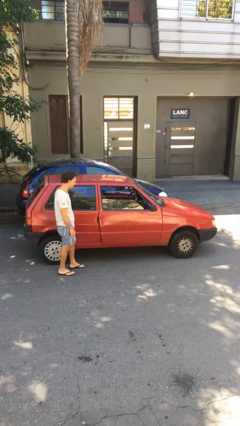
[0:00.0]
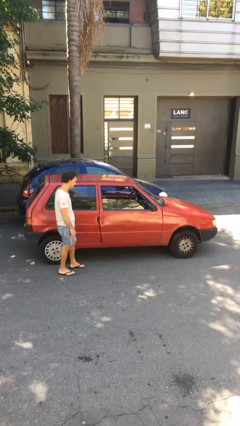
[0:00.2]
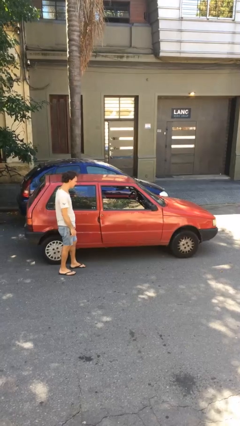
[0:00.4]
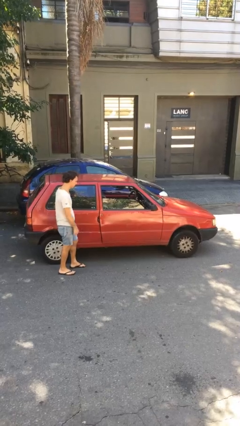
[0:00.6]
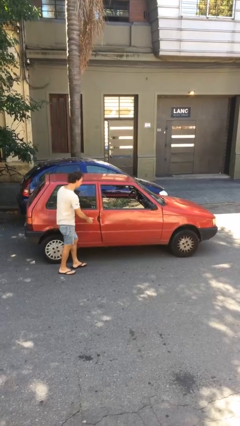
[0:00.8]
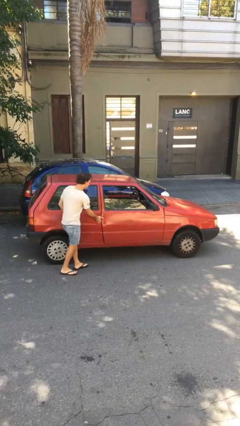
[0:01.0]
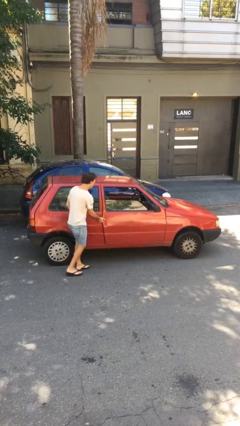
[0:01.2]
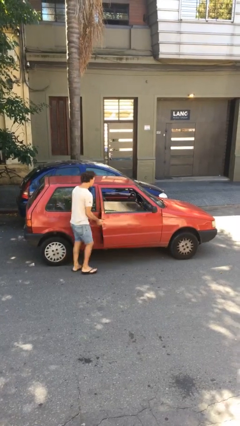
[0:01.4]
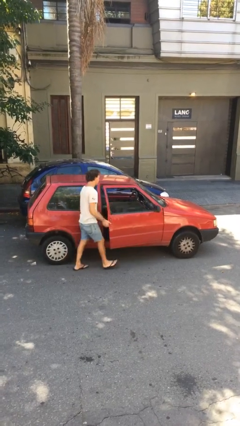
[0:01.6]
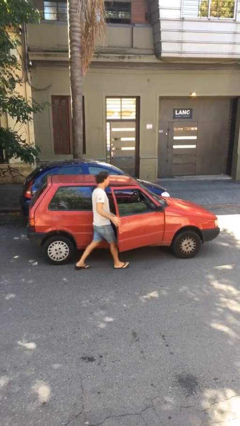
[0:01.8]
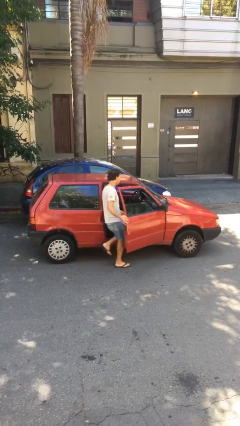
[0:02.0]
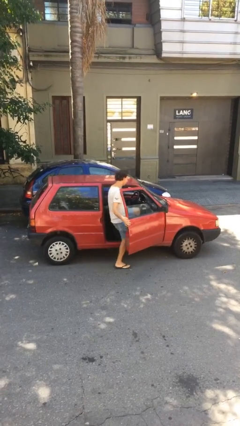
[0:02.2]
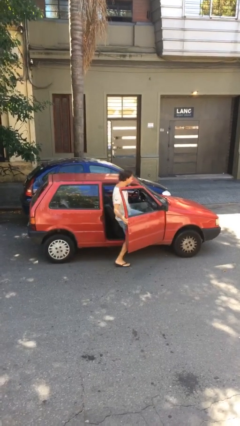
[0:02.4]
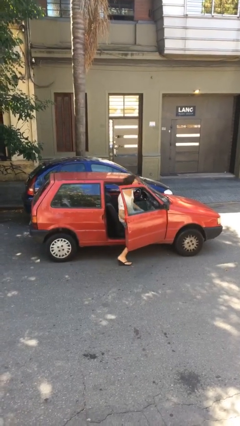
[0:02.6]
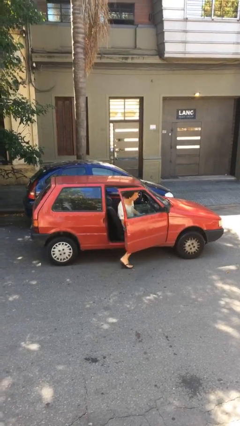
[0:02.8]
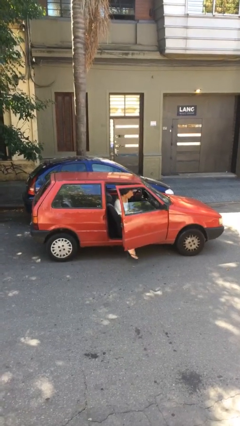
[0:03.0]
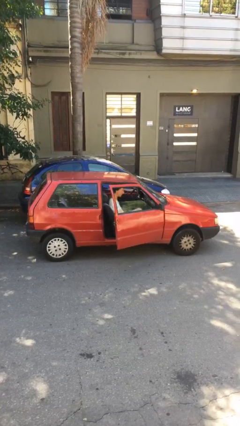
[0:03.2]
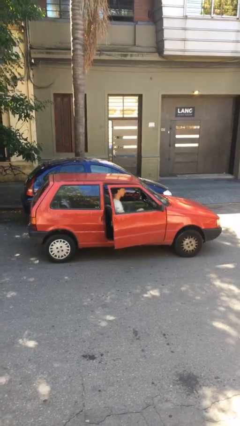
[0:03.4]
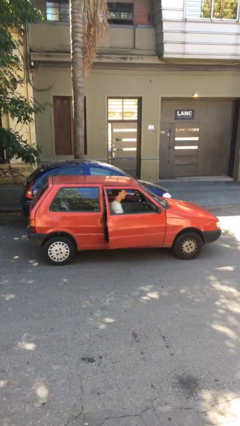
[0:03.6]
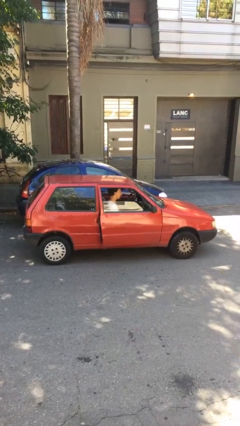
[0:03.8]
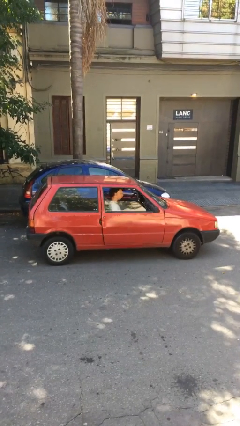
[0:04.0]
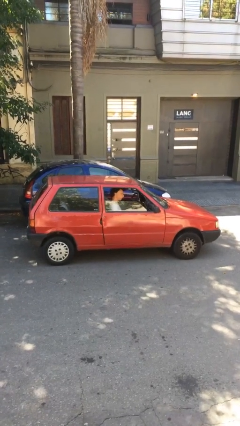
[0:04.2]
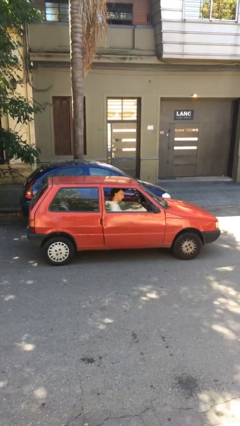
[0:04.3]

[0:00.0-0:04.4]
car picks up person

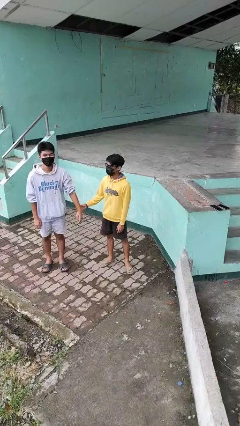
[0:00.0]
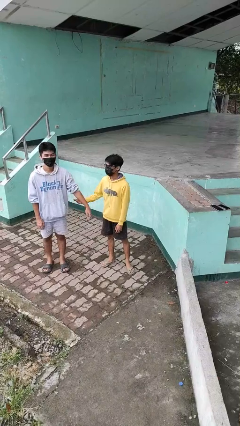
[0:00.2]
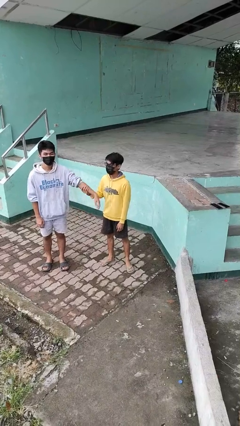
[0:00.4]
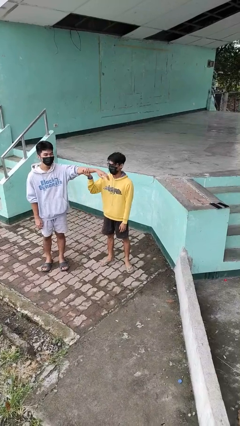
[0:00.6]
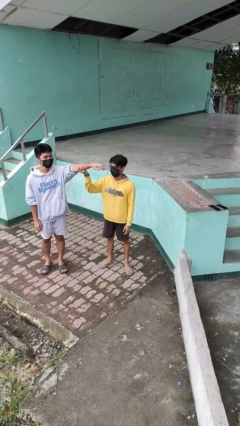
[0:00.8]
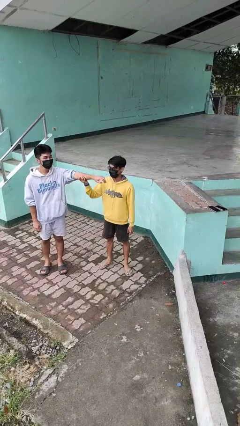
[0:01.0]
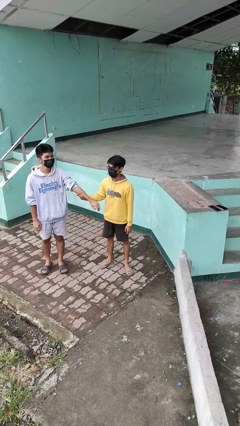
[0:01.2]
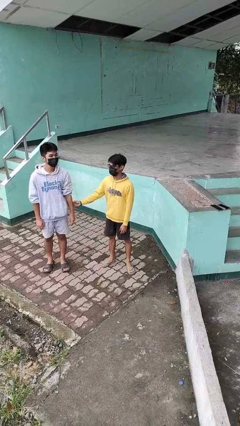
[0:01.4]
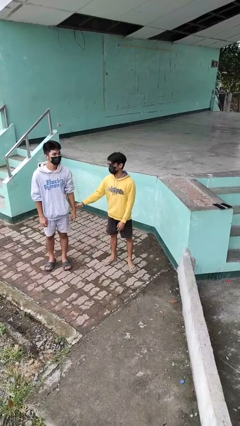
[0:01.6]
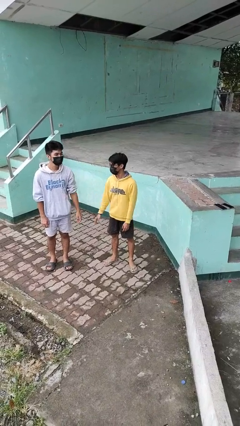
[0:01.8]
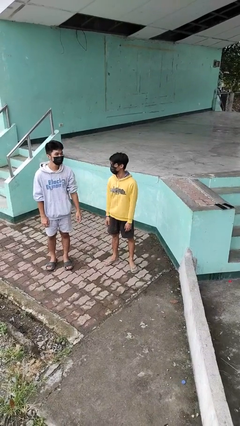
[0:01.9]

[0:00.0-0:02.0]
person grabs person by forearm

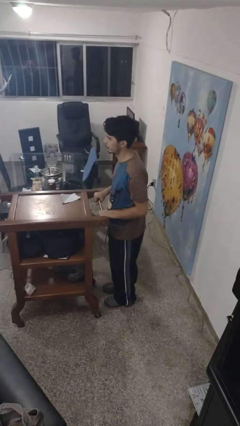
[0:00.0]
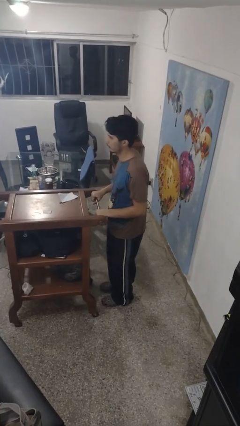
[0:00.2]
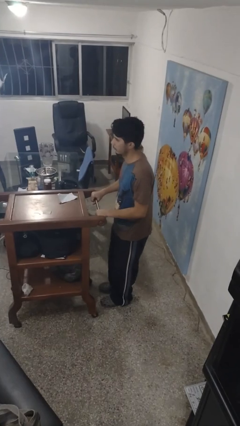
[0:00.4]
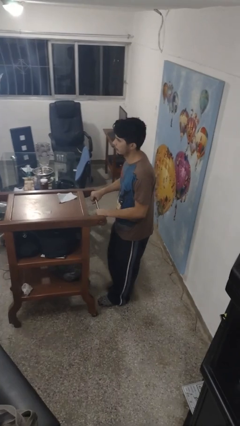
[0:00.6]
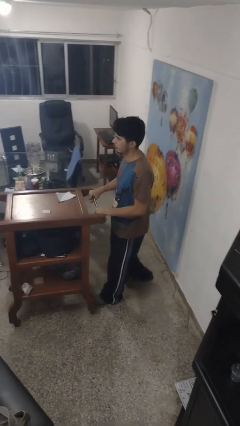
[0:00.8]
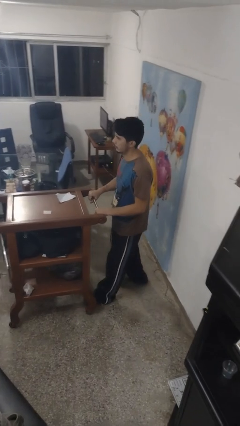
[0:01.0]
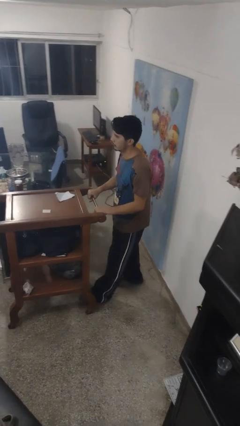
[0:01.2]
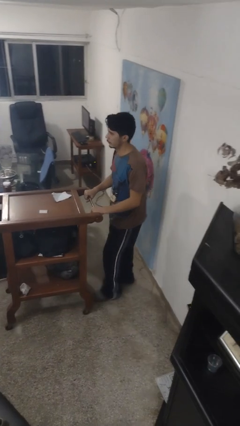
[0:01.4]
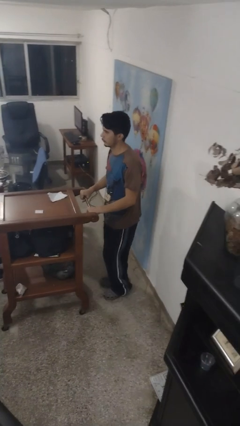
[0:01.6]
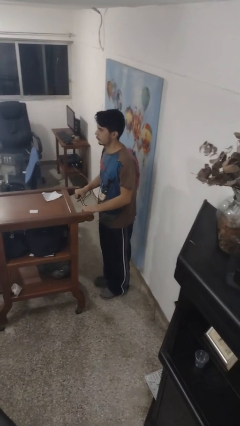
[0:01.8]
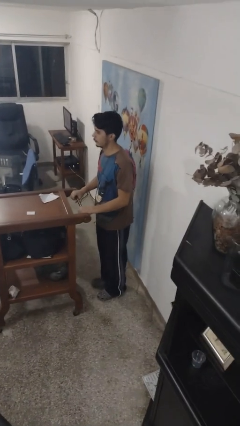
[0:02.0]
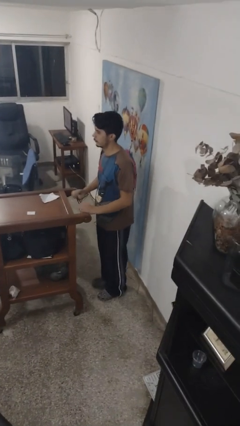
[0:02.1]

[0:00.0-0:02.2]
person pulls wheeled cart

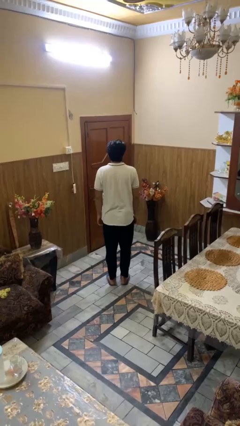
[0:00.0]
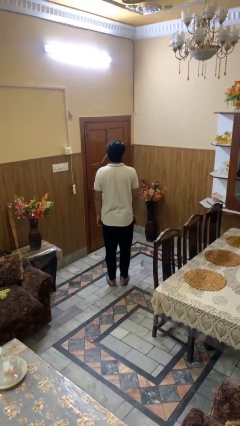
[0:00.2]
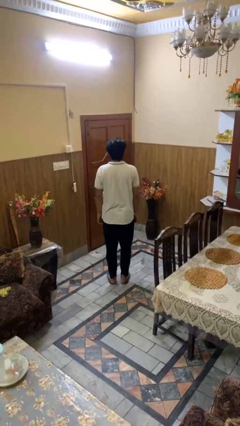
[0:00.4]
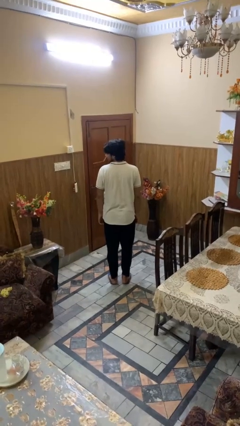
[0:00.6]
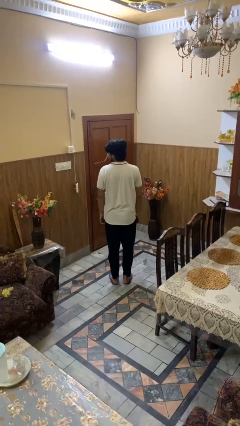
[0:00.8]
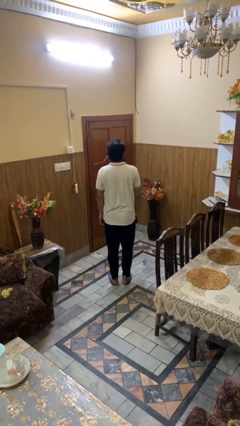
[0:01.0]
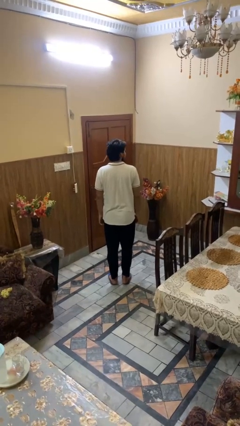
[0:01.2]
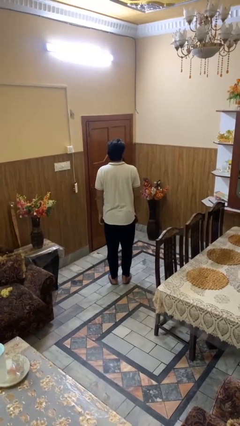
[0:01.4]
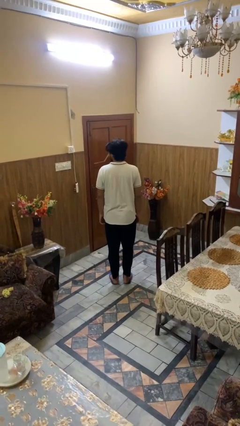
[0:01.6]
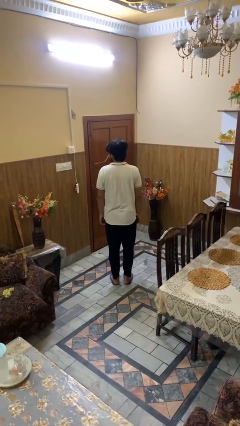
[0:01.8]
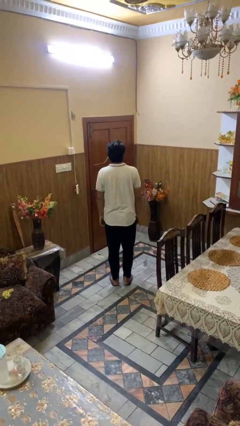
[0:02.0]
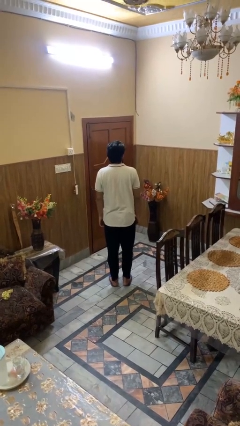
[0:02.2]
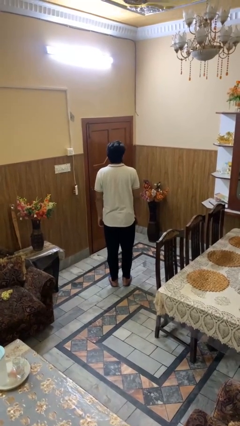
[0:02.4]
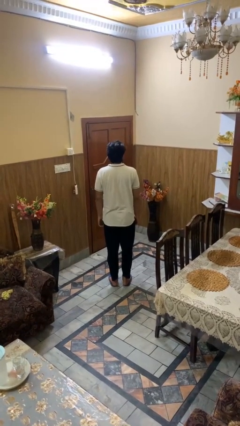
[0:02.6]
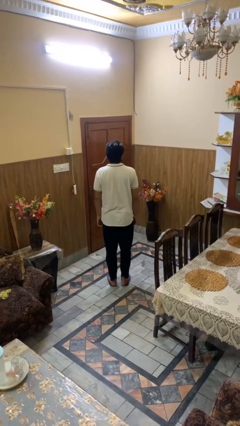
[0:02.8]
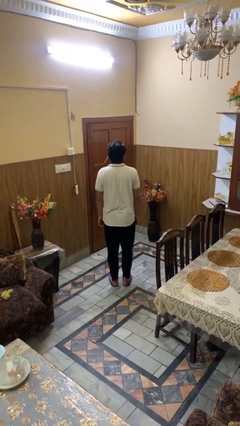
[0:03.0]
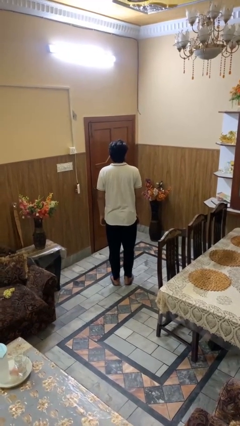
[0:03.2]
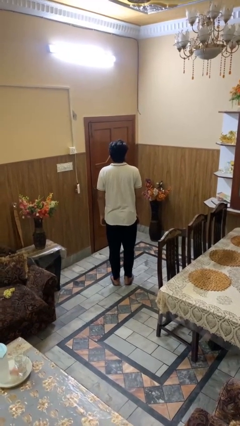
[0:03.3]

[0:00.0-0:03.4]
person shakes head

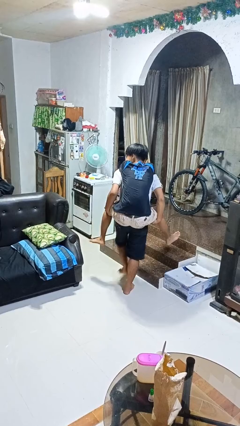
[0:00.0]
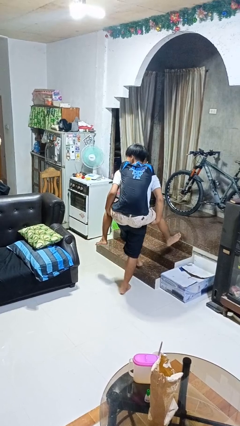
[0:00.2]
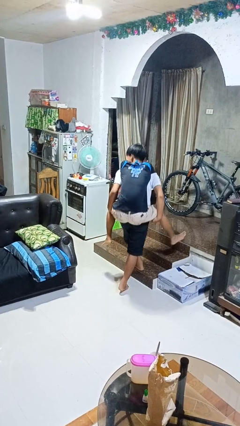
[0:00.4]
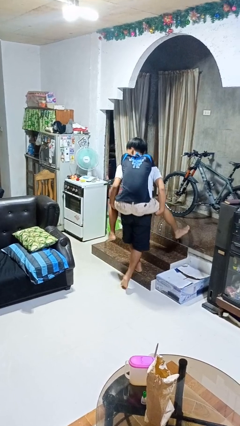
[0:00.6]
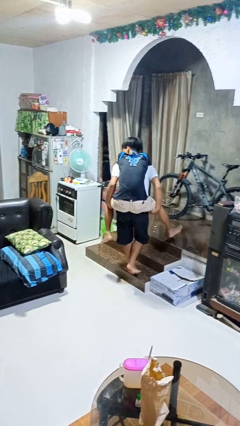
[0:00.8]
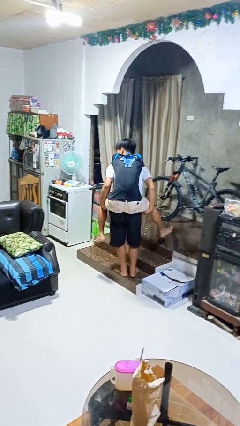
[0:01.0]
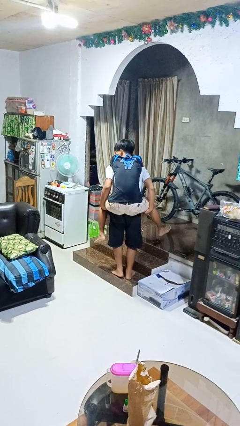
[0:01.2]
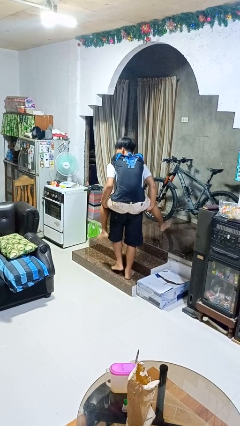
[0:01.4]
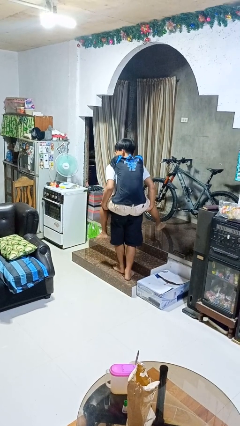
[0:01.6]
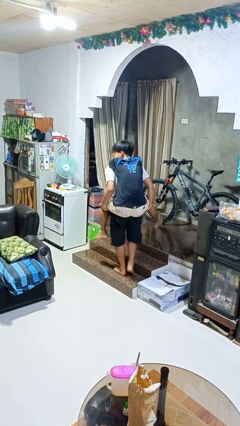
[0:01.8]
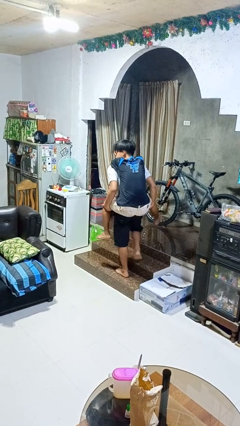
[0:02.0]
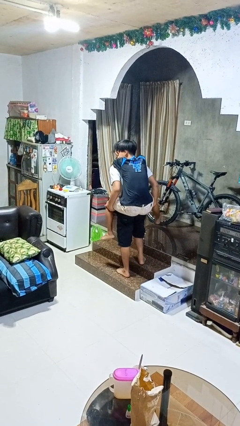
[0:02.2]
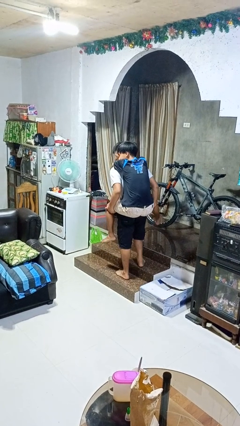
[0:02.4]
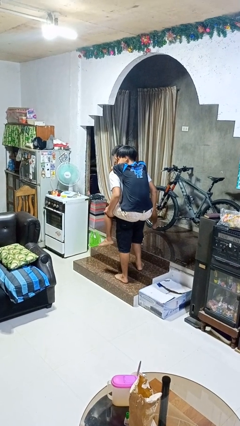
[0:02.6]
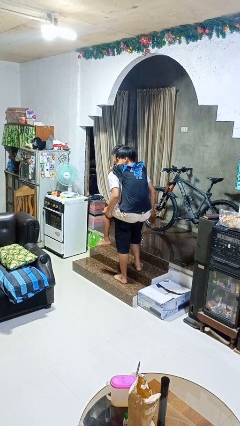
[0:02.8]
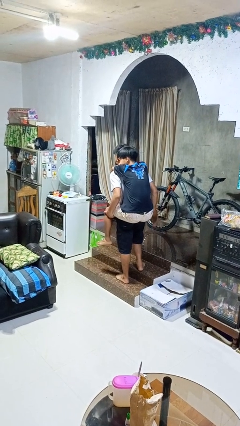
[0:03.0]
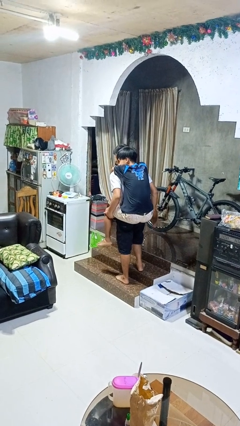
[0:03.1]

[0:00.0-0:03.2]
person carries person on back

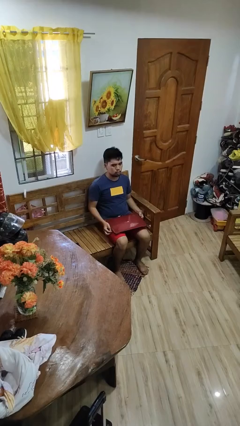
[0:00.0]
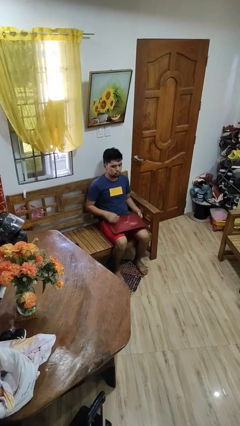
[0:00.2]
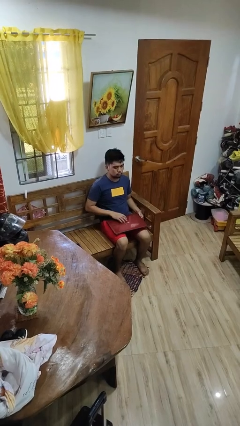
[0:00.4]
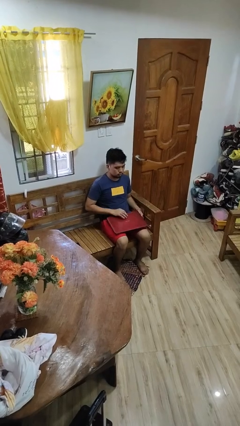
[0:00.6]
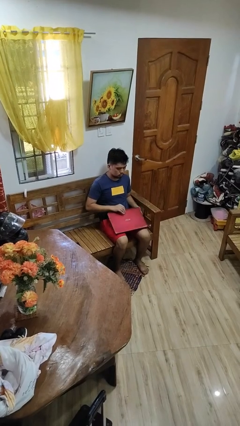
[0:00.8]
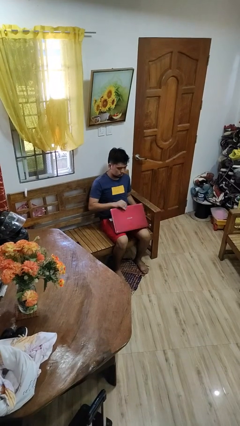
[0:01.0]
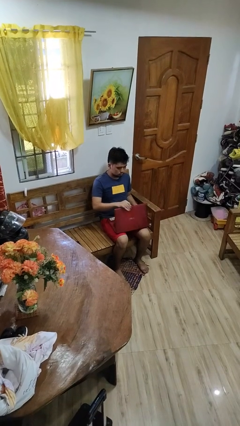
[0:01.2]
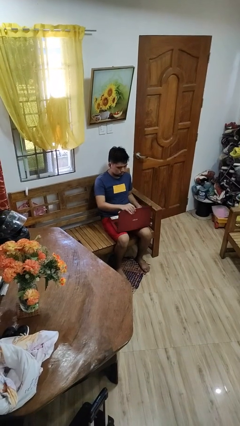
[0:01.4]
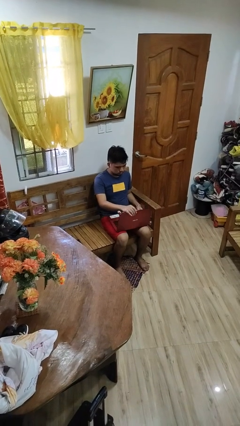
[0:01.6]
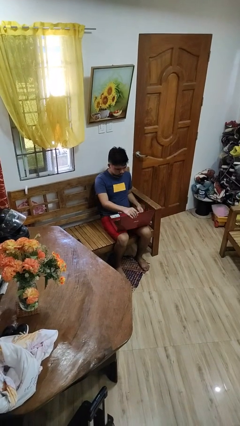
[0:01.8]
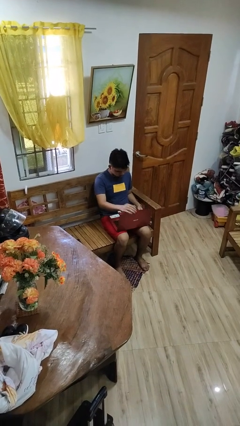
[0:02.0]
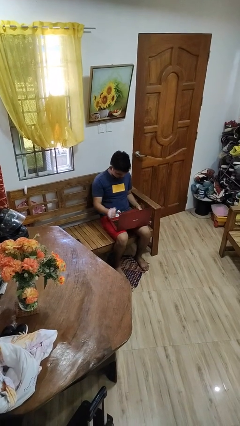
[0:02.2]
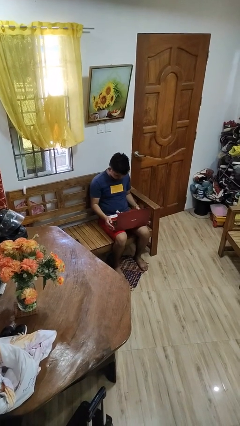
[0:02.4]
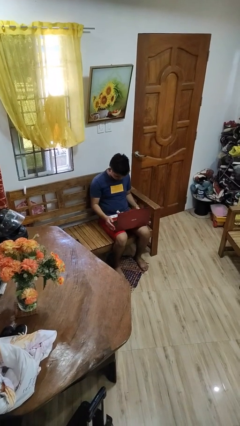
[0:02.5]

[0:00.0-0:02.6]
person opens laptop
